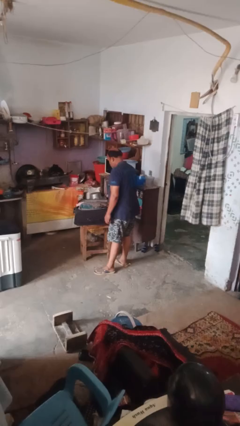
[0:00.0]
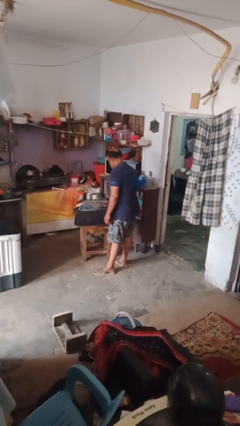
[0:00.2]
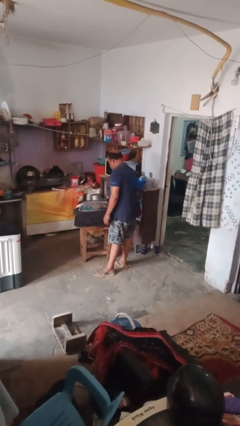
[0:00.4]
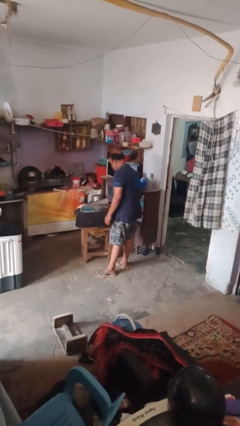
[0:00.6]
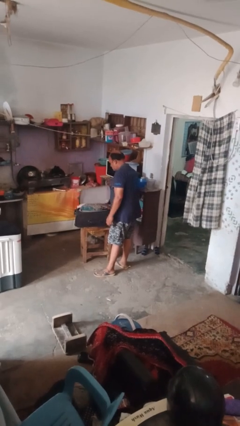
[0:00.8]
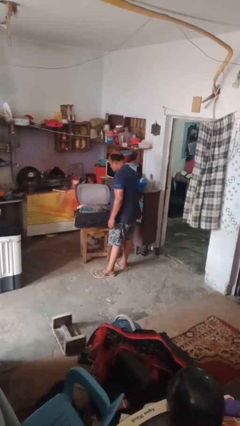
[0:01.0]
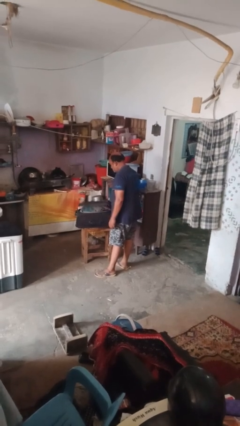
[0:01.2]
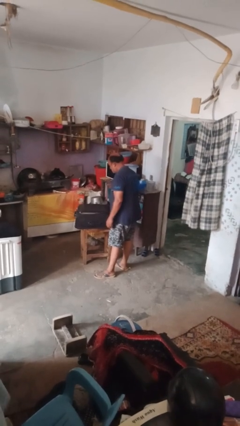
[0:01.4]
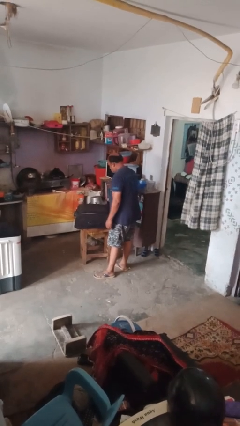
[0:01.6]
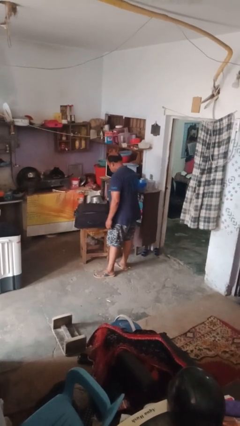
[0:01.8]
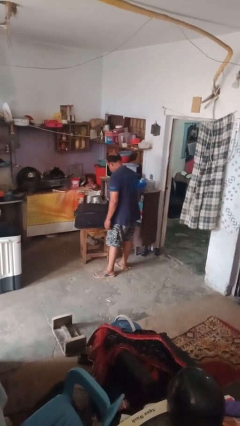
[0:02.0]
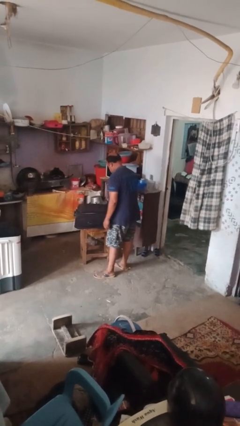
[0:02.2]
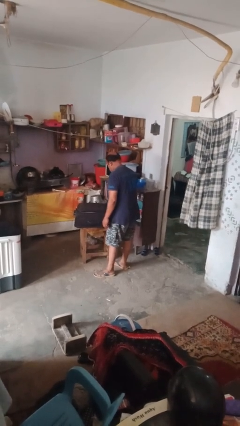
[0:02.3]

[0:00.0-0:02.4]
person closes suitcase

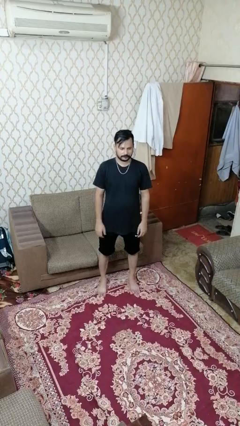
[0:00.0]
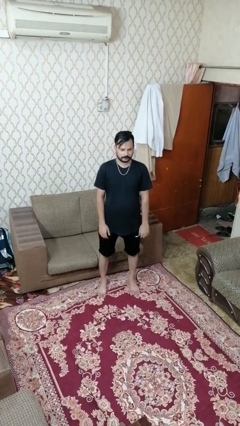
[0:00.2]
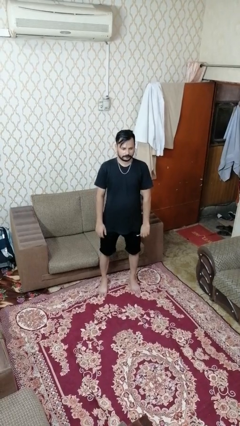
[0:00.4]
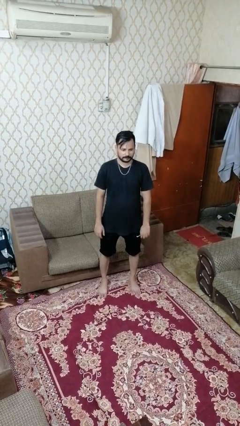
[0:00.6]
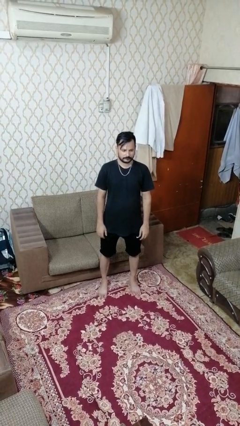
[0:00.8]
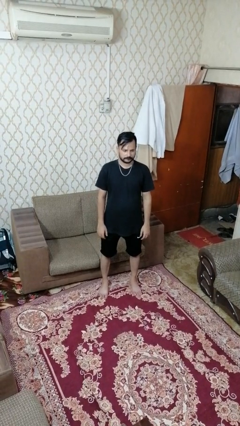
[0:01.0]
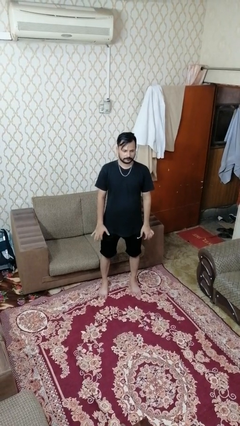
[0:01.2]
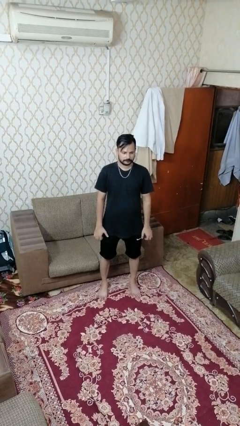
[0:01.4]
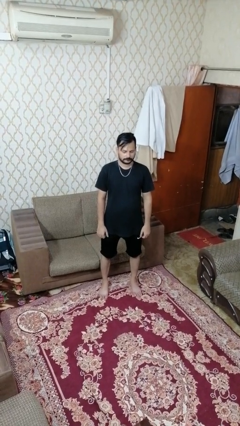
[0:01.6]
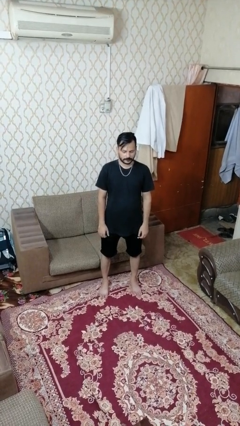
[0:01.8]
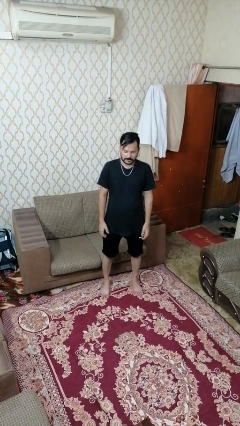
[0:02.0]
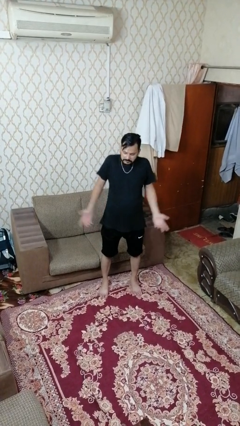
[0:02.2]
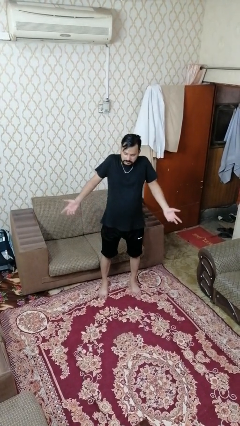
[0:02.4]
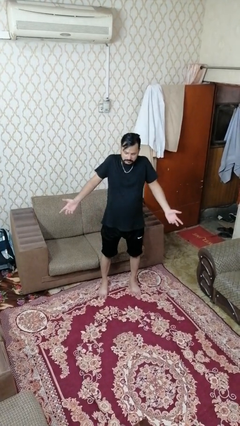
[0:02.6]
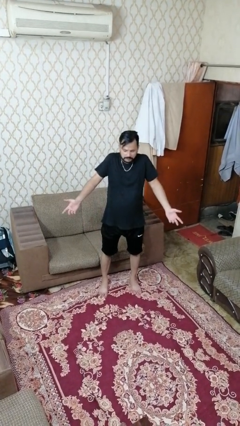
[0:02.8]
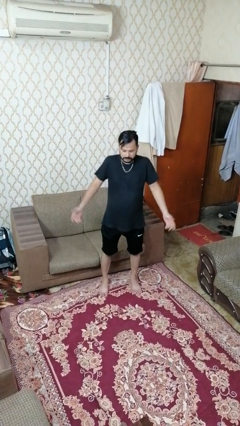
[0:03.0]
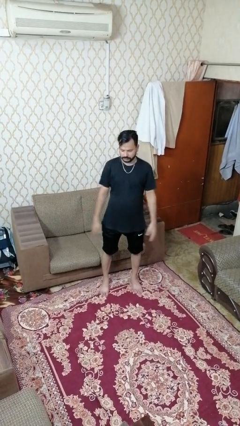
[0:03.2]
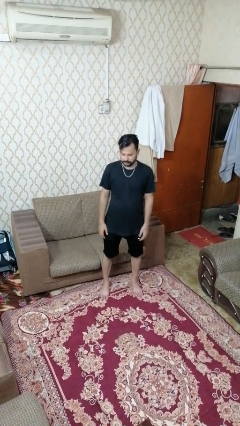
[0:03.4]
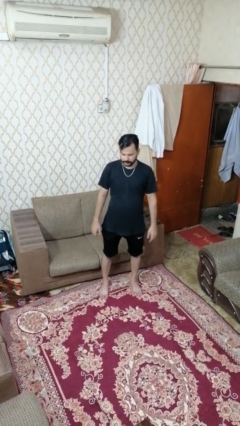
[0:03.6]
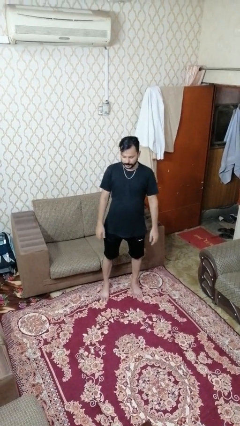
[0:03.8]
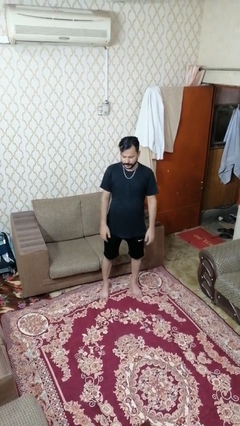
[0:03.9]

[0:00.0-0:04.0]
person shrugs

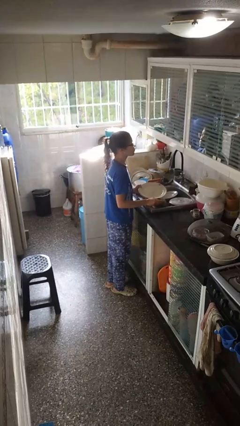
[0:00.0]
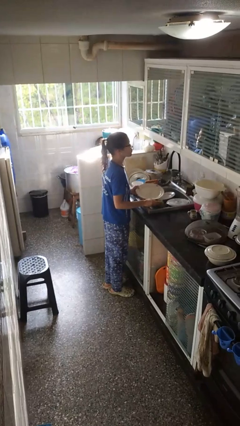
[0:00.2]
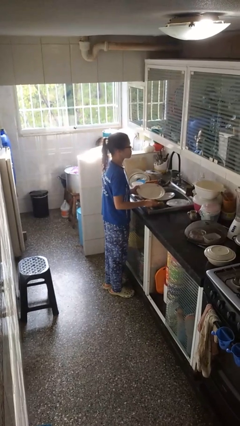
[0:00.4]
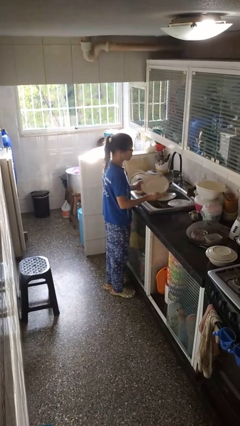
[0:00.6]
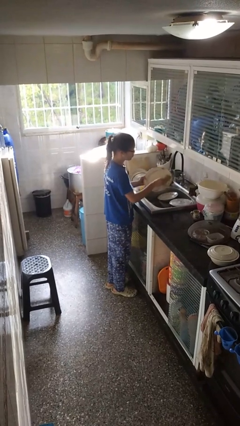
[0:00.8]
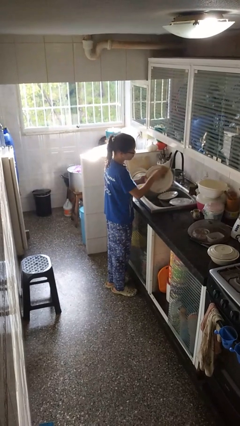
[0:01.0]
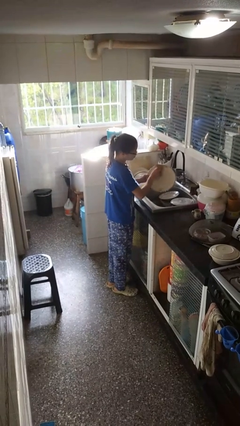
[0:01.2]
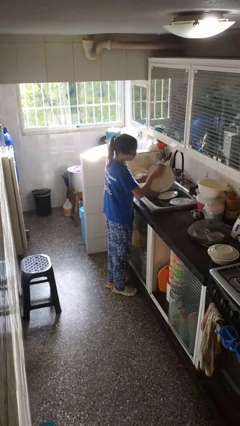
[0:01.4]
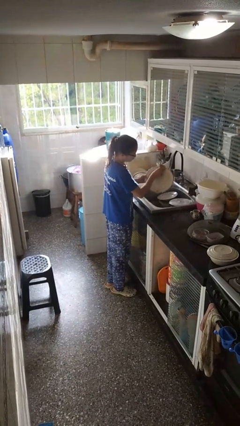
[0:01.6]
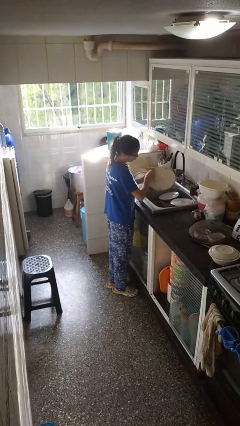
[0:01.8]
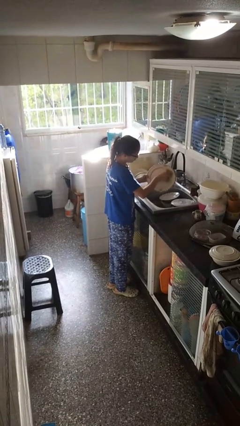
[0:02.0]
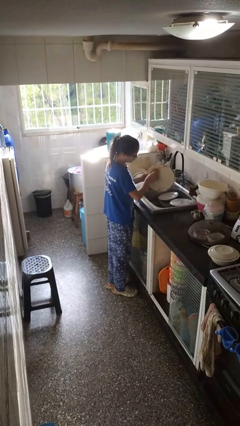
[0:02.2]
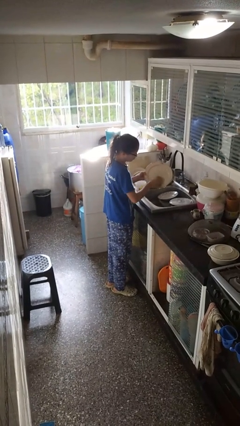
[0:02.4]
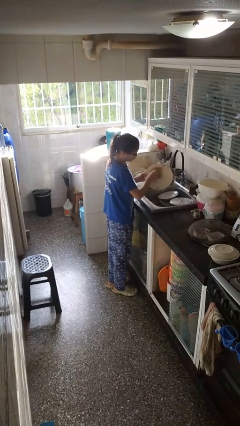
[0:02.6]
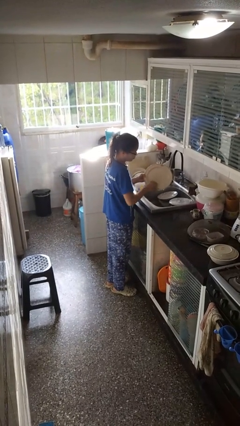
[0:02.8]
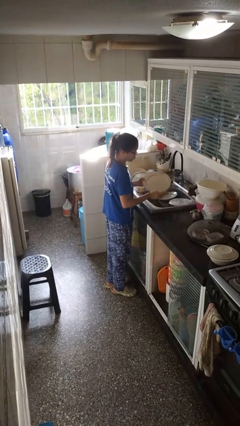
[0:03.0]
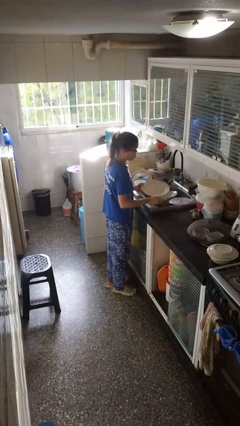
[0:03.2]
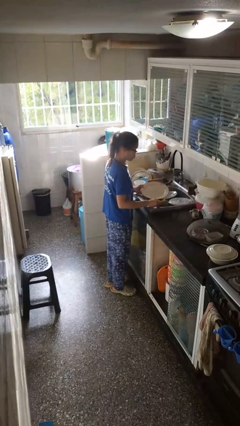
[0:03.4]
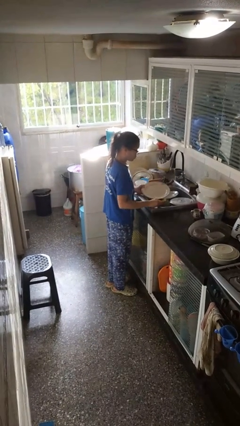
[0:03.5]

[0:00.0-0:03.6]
person washes dish

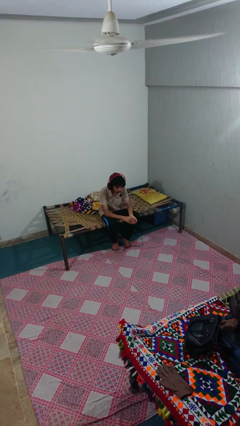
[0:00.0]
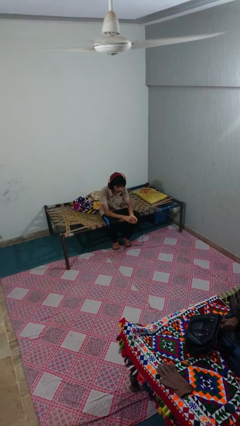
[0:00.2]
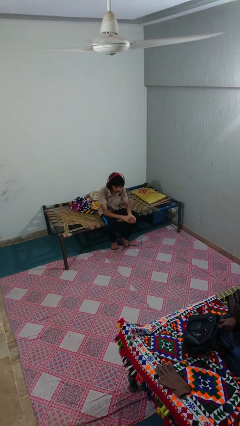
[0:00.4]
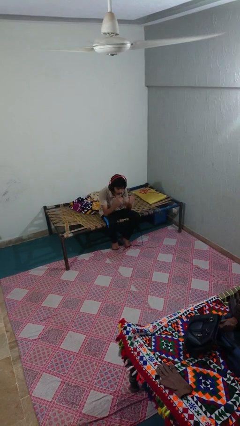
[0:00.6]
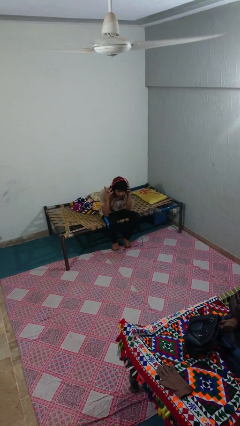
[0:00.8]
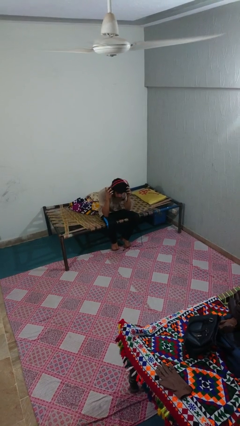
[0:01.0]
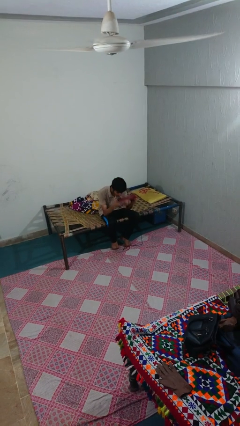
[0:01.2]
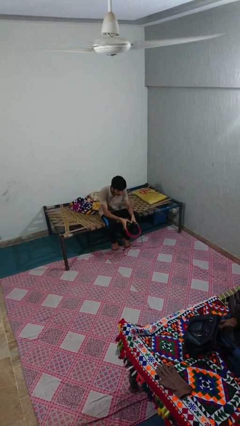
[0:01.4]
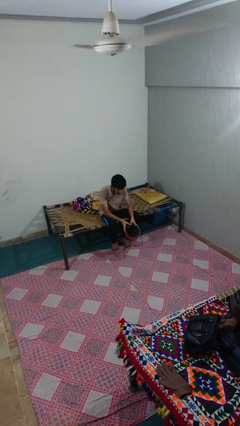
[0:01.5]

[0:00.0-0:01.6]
person takes off headphones

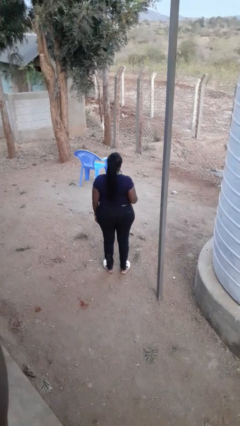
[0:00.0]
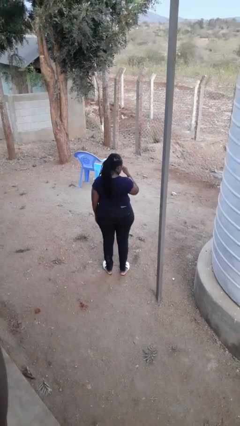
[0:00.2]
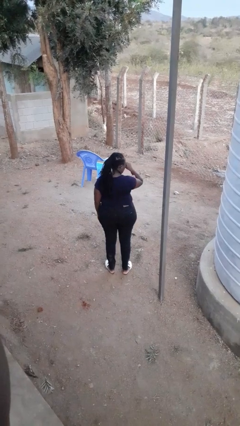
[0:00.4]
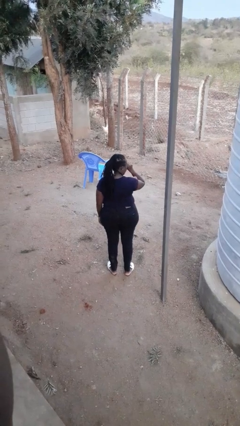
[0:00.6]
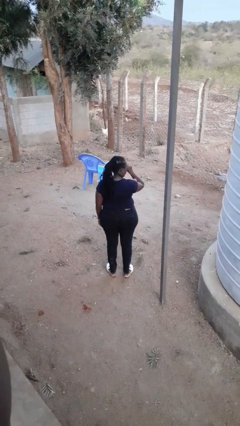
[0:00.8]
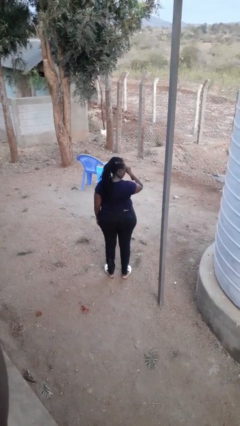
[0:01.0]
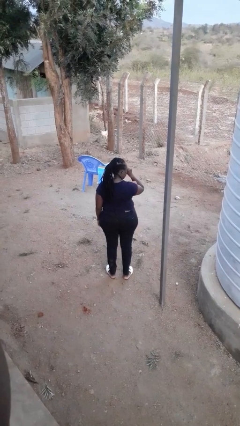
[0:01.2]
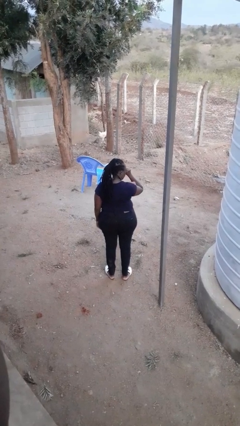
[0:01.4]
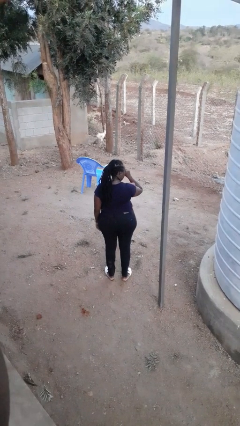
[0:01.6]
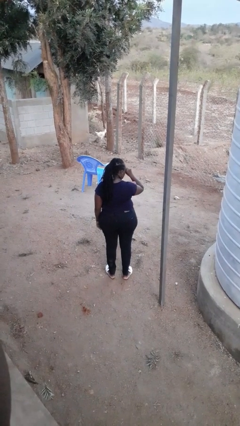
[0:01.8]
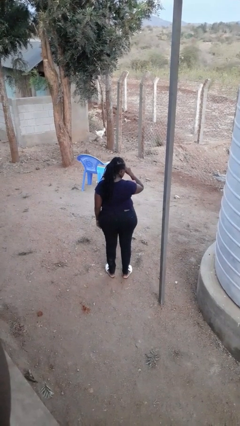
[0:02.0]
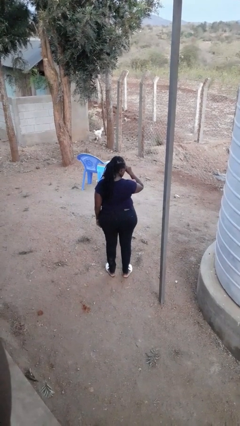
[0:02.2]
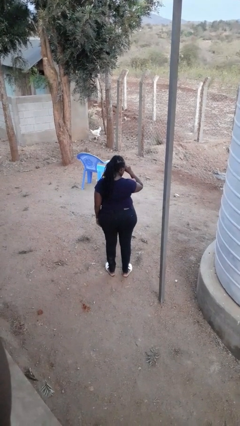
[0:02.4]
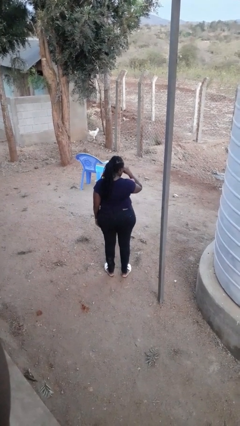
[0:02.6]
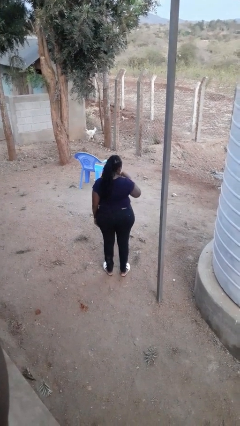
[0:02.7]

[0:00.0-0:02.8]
person rubs eyes

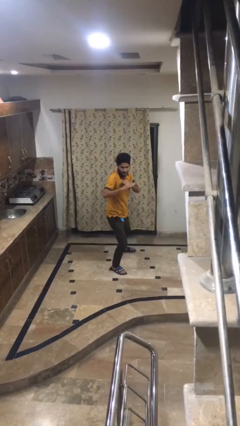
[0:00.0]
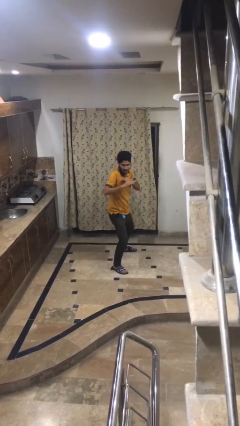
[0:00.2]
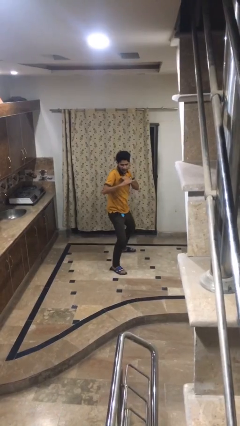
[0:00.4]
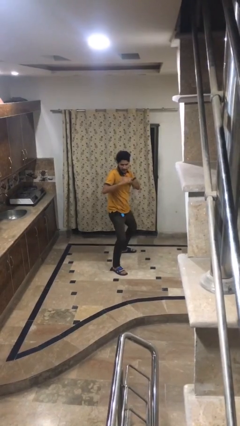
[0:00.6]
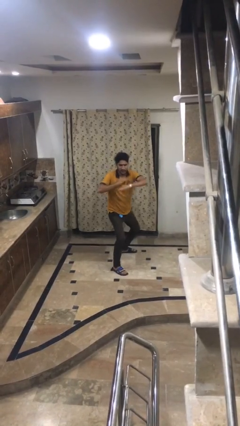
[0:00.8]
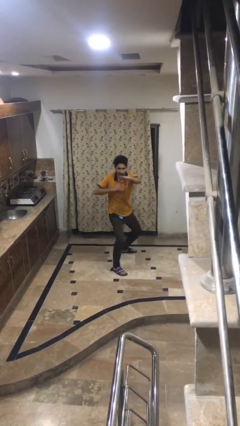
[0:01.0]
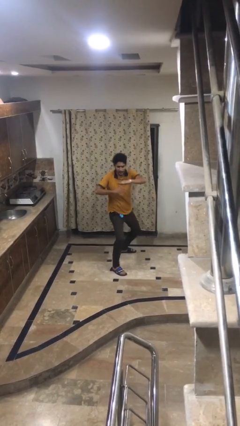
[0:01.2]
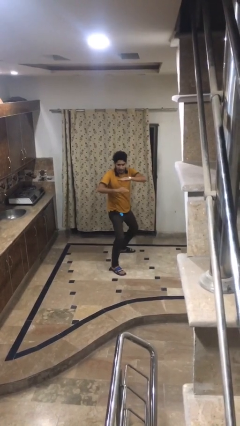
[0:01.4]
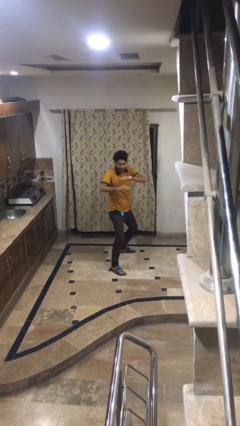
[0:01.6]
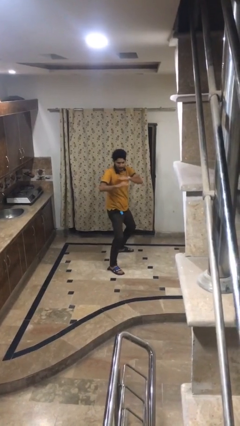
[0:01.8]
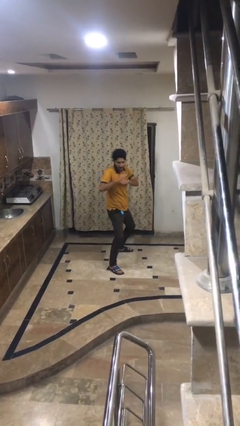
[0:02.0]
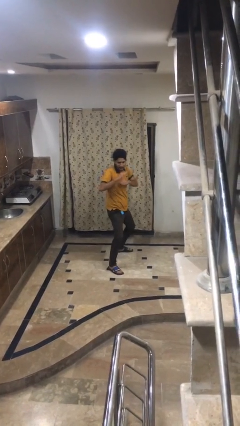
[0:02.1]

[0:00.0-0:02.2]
person karate chop

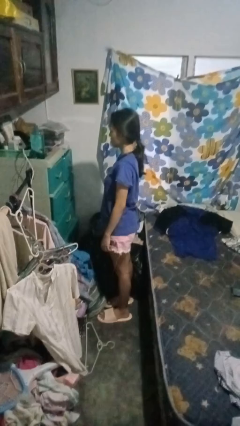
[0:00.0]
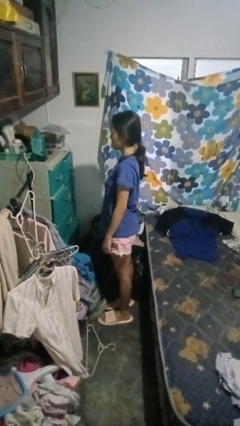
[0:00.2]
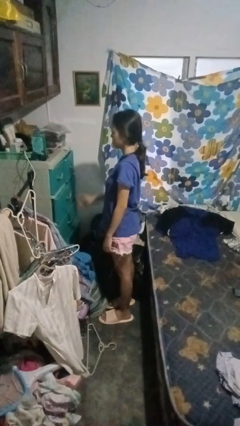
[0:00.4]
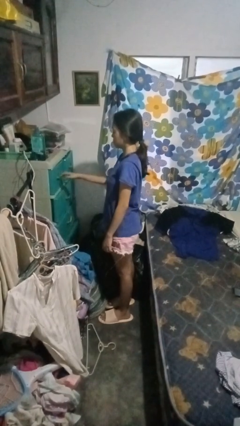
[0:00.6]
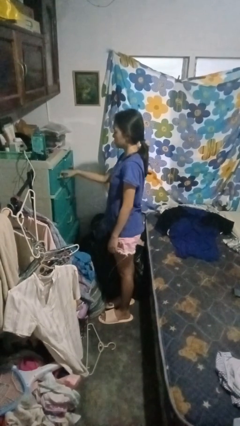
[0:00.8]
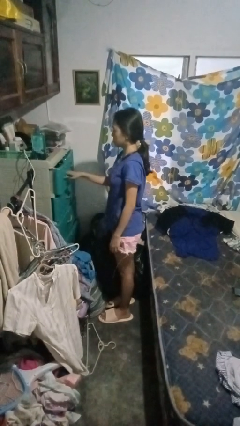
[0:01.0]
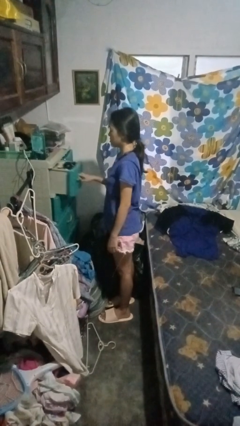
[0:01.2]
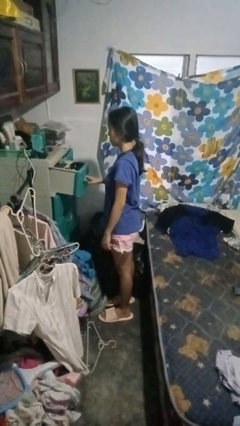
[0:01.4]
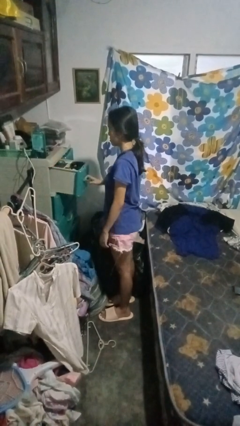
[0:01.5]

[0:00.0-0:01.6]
person opens dresser drawer
